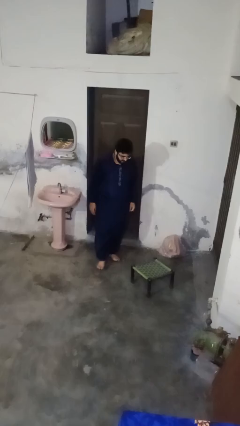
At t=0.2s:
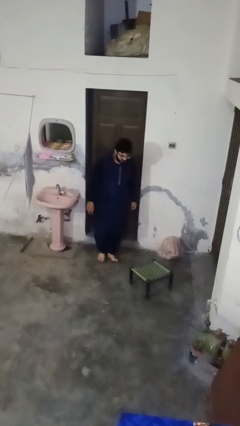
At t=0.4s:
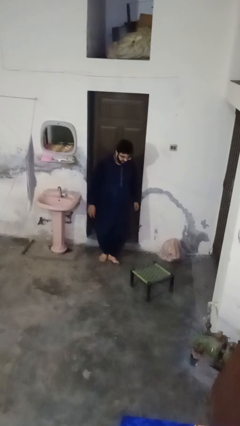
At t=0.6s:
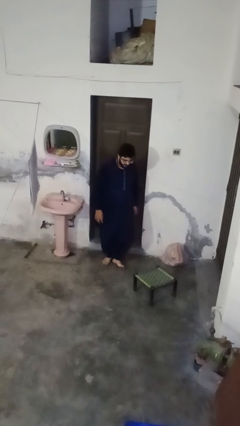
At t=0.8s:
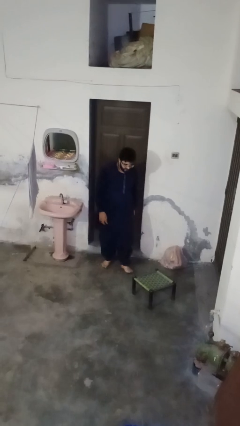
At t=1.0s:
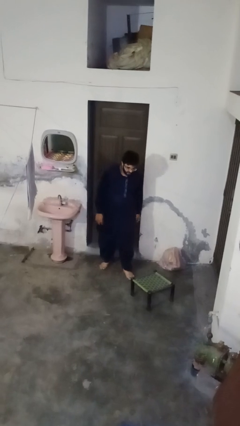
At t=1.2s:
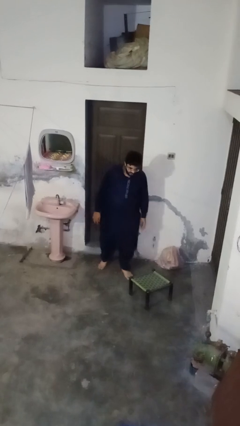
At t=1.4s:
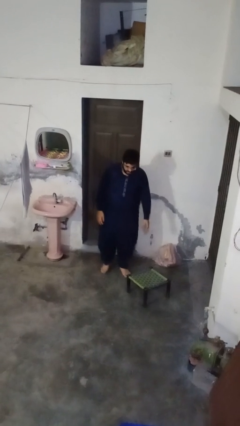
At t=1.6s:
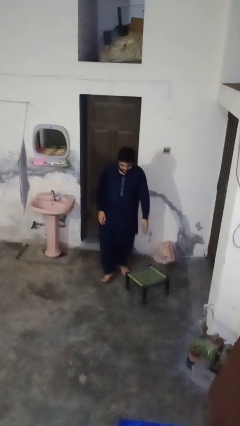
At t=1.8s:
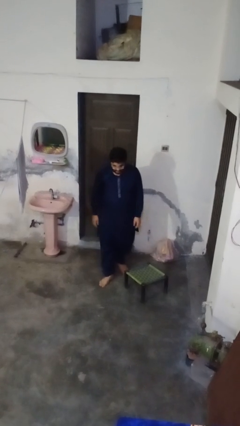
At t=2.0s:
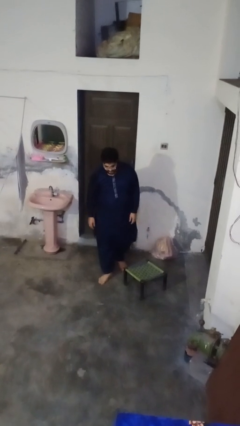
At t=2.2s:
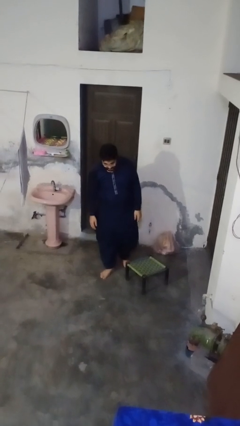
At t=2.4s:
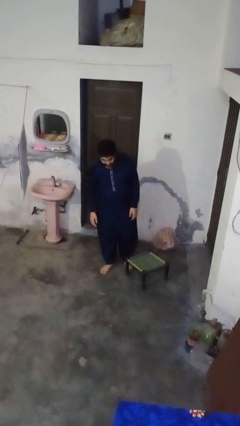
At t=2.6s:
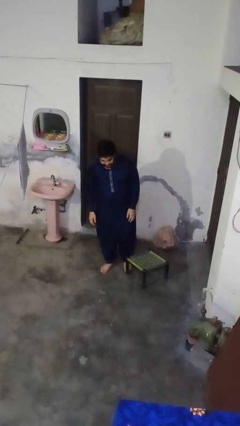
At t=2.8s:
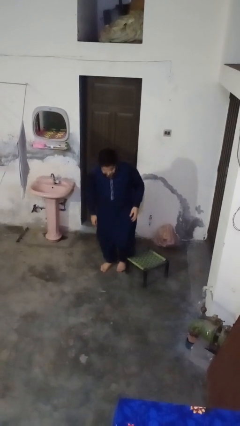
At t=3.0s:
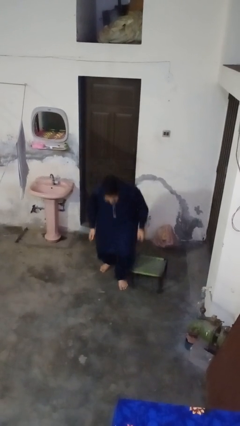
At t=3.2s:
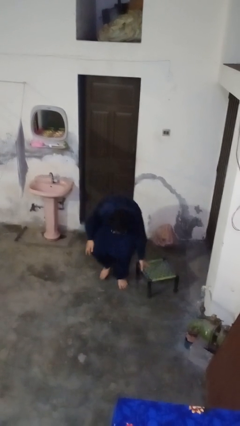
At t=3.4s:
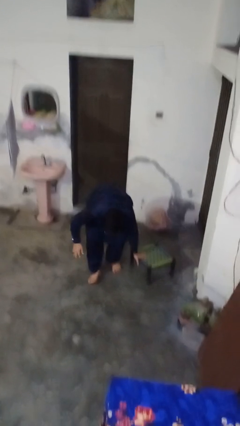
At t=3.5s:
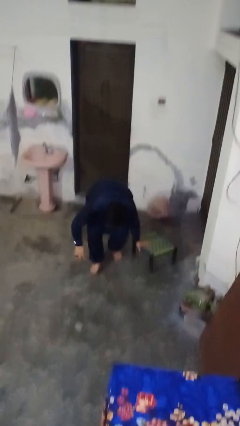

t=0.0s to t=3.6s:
person trips on object on floor

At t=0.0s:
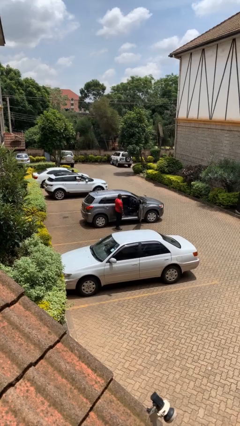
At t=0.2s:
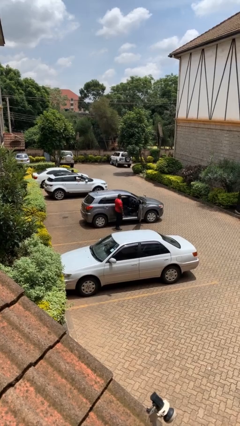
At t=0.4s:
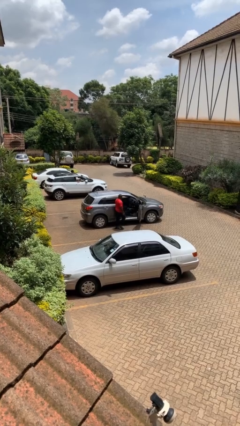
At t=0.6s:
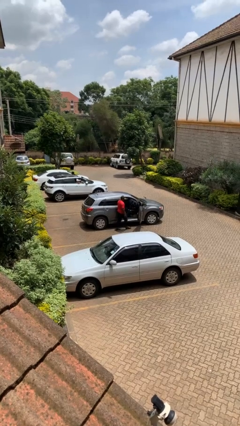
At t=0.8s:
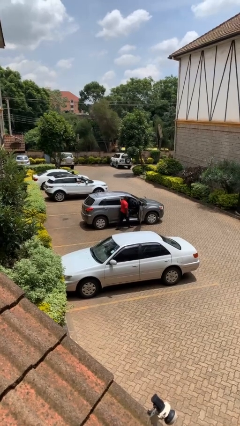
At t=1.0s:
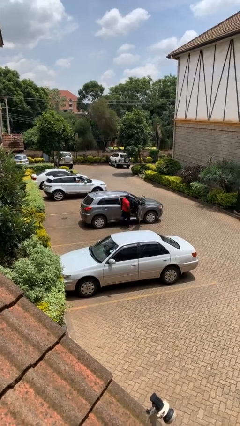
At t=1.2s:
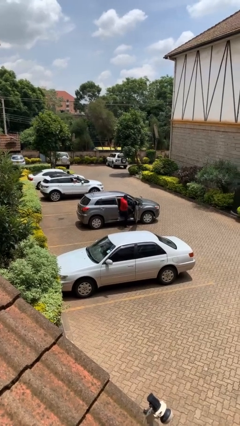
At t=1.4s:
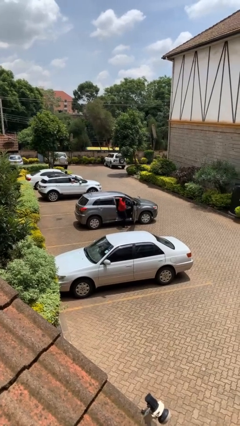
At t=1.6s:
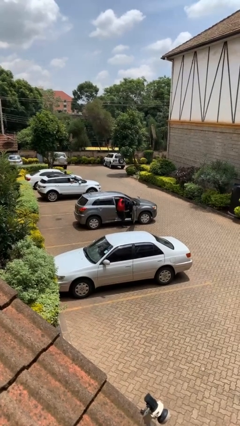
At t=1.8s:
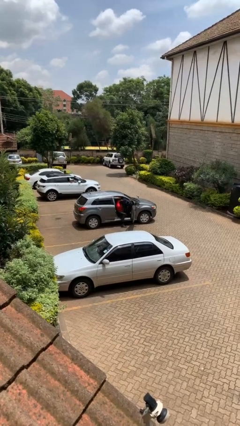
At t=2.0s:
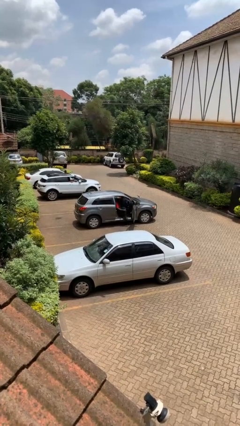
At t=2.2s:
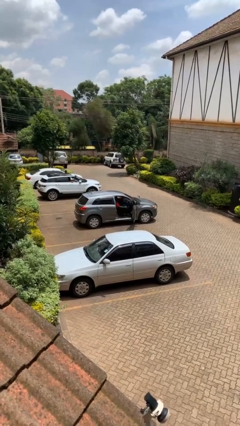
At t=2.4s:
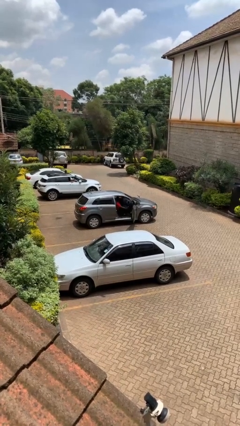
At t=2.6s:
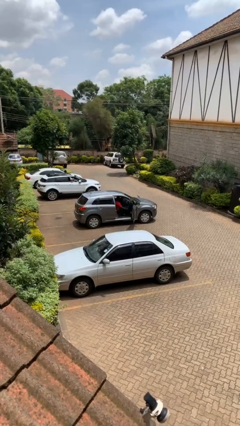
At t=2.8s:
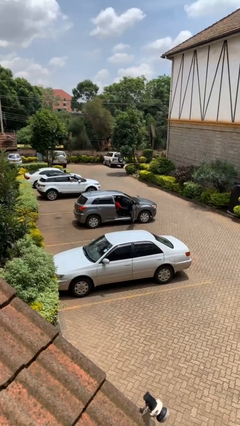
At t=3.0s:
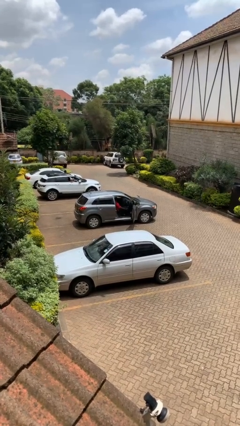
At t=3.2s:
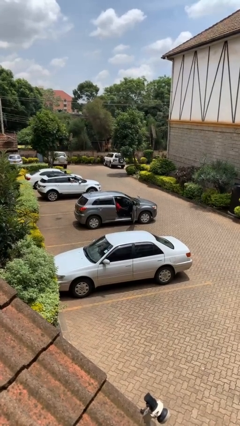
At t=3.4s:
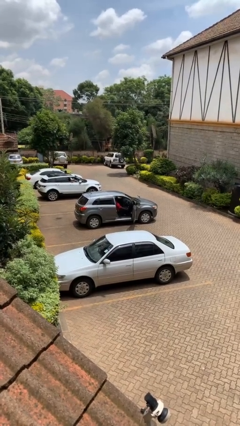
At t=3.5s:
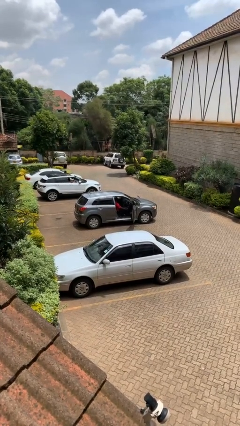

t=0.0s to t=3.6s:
person enters car

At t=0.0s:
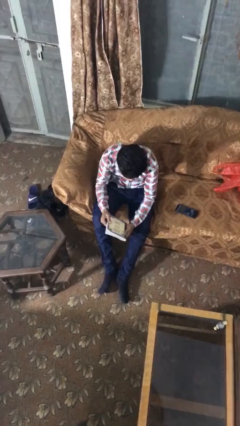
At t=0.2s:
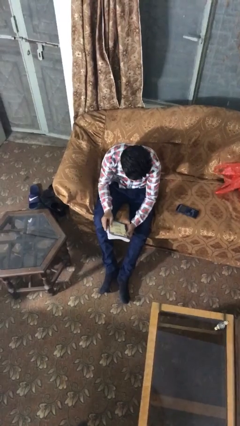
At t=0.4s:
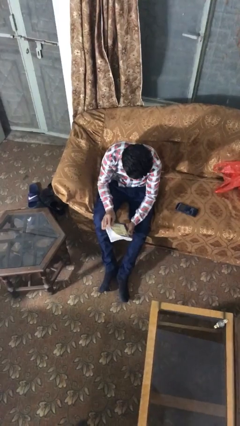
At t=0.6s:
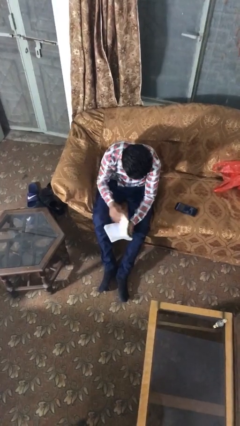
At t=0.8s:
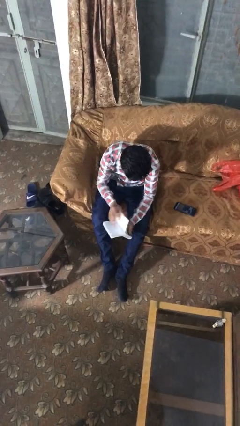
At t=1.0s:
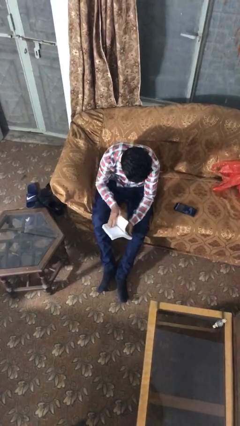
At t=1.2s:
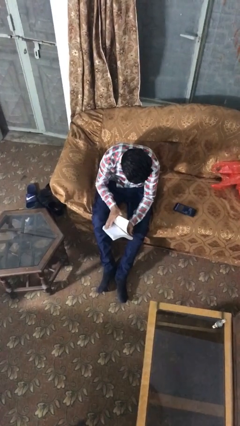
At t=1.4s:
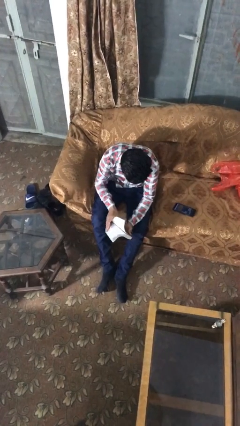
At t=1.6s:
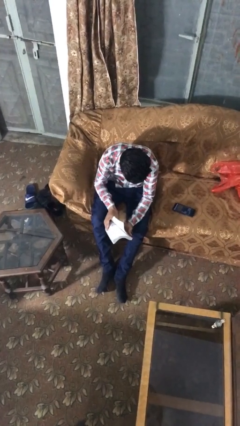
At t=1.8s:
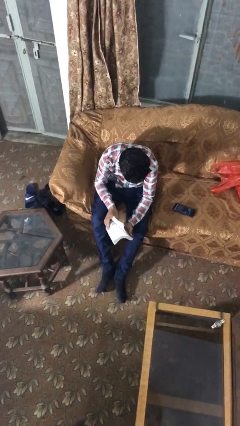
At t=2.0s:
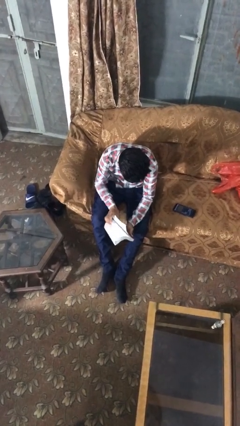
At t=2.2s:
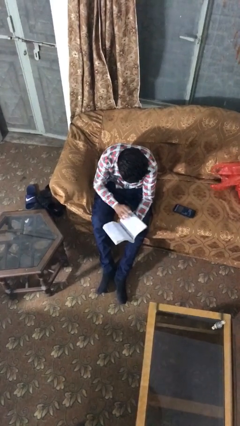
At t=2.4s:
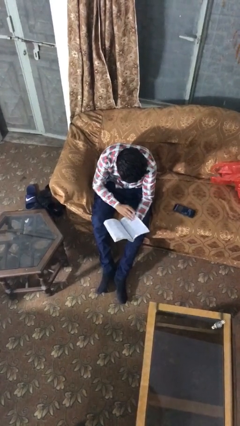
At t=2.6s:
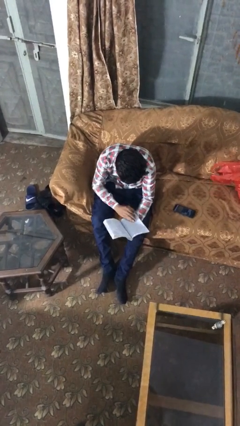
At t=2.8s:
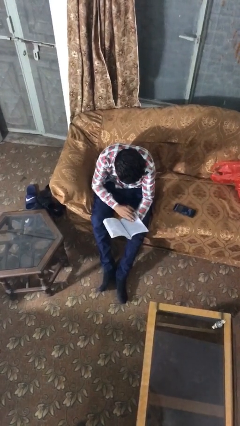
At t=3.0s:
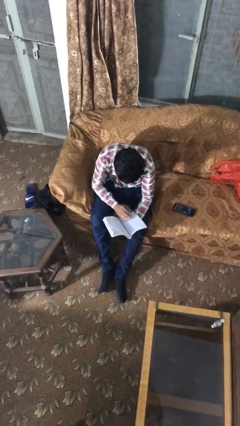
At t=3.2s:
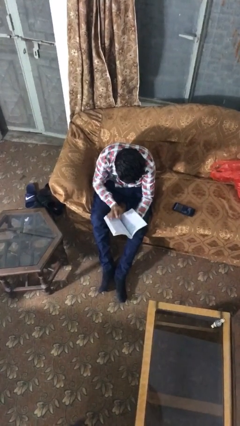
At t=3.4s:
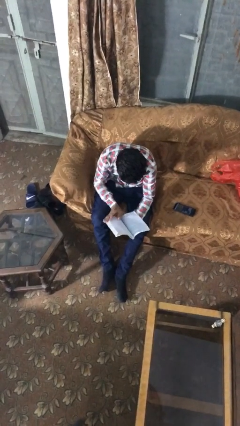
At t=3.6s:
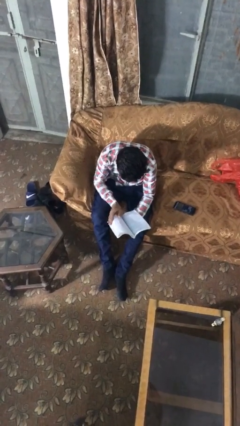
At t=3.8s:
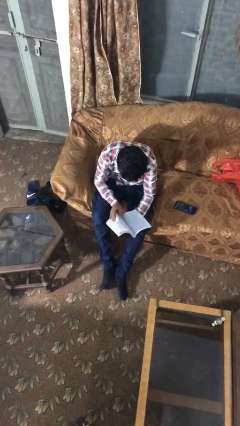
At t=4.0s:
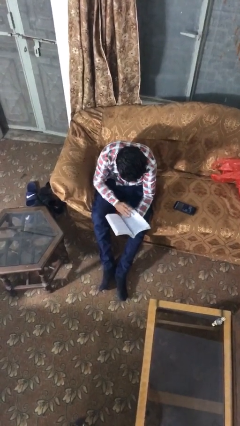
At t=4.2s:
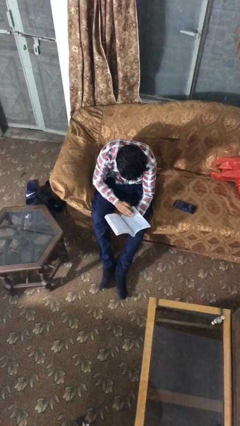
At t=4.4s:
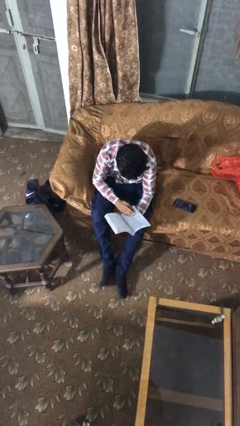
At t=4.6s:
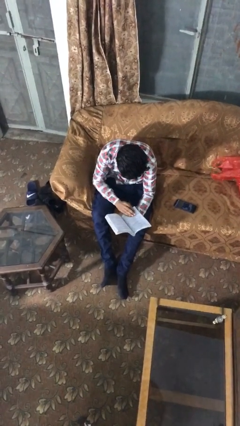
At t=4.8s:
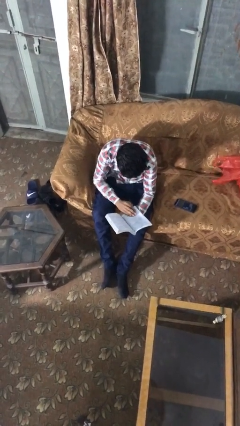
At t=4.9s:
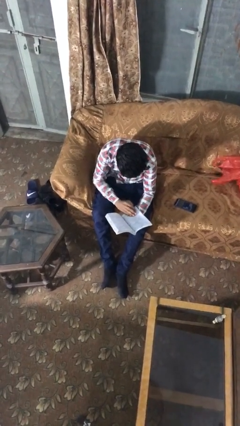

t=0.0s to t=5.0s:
person reads document

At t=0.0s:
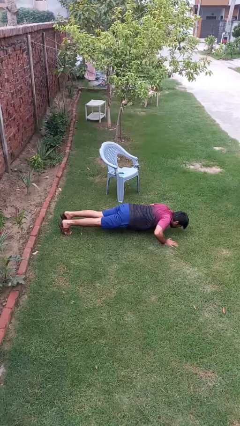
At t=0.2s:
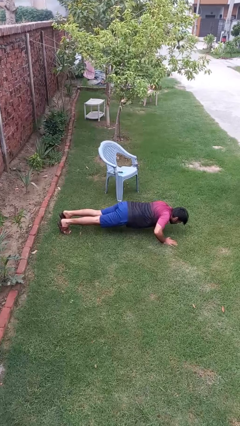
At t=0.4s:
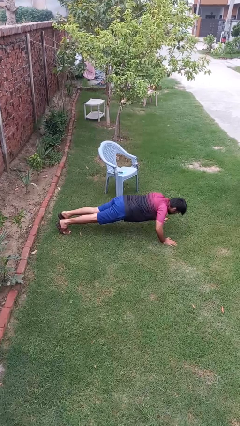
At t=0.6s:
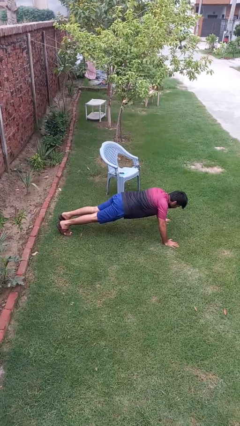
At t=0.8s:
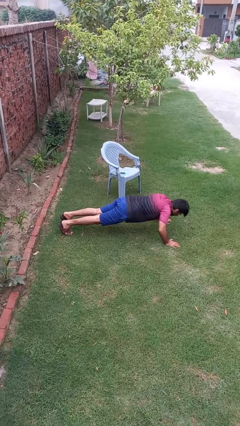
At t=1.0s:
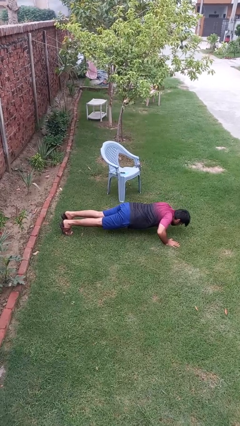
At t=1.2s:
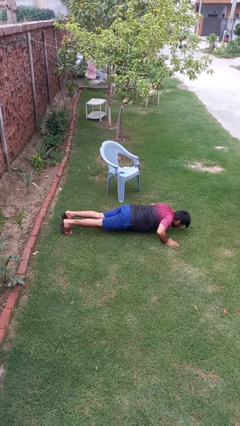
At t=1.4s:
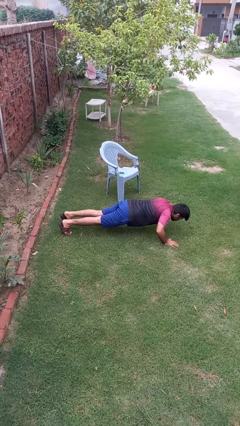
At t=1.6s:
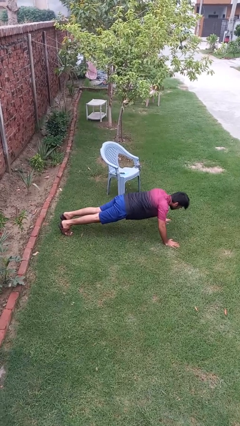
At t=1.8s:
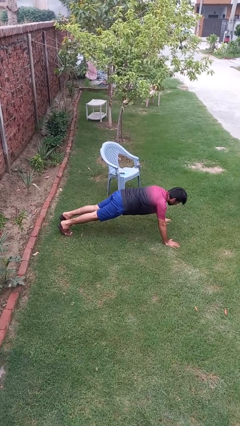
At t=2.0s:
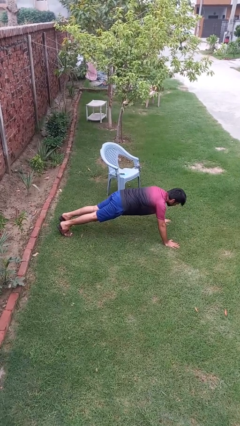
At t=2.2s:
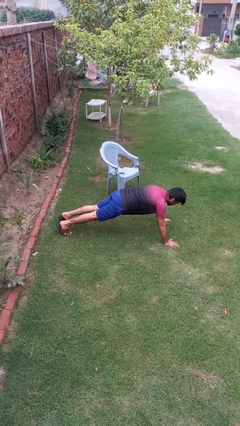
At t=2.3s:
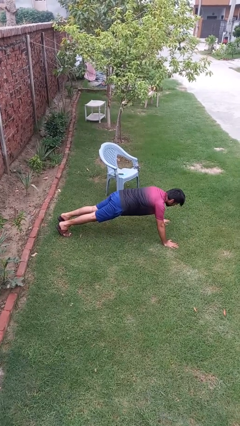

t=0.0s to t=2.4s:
person exercises with pushup

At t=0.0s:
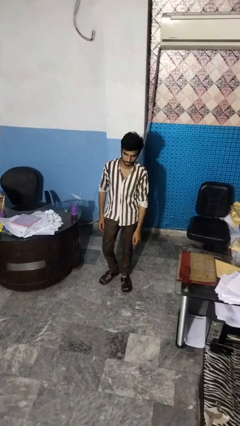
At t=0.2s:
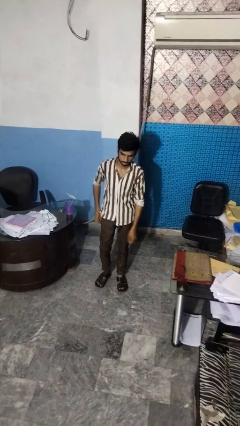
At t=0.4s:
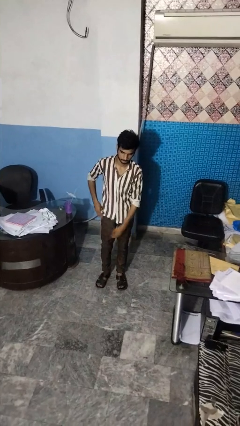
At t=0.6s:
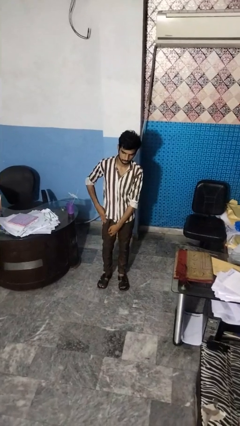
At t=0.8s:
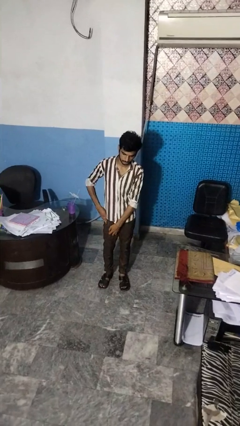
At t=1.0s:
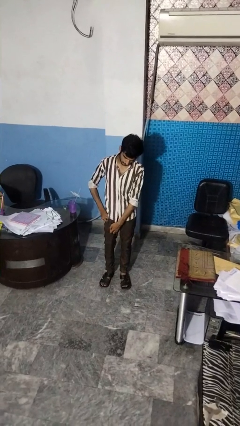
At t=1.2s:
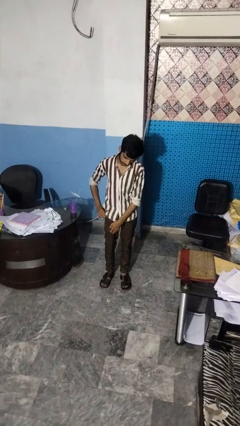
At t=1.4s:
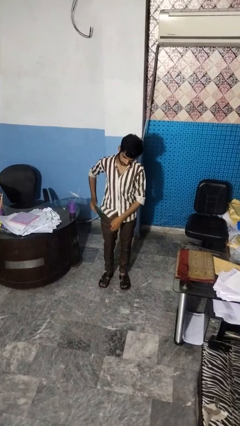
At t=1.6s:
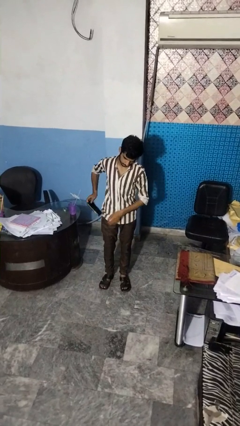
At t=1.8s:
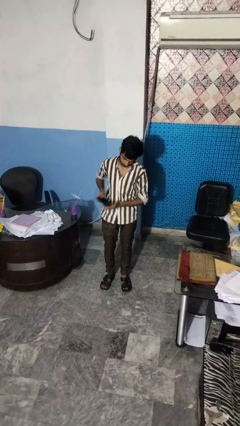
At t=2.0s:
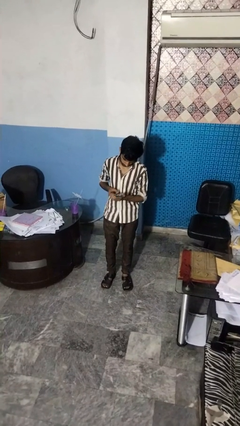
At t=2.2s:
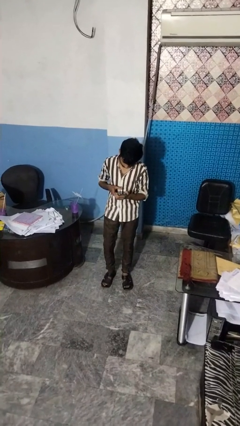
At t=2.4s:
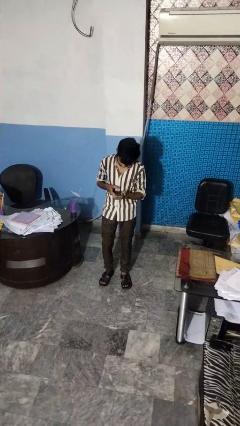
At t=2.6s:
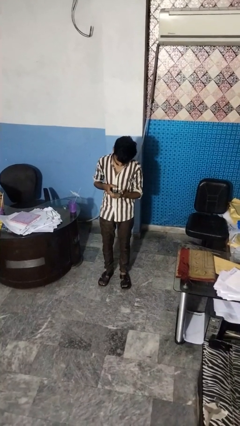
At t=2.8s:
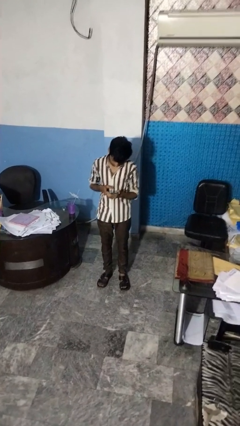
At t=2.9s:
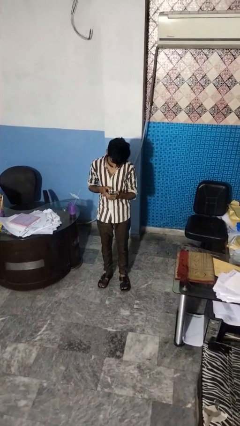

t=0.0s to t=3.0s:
person takes phone from pocket
